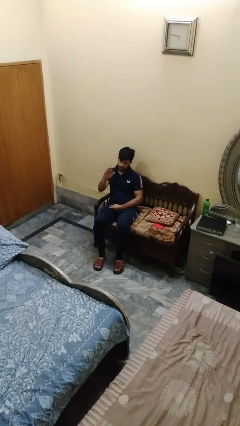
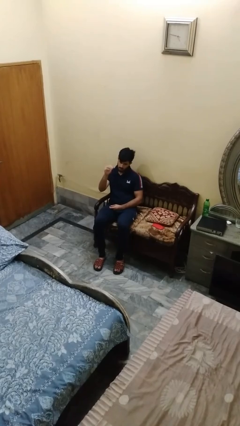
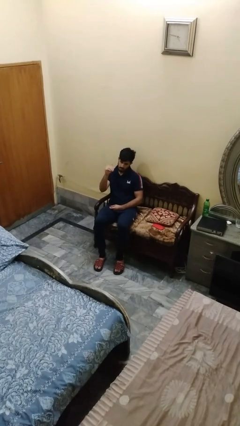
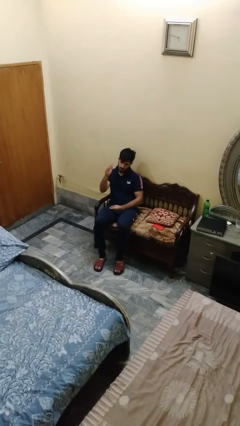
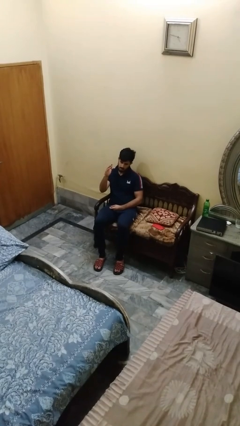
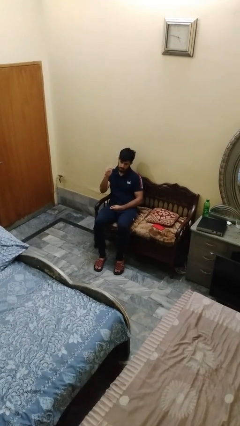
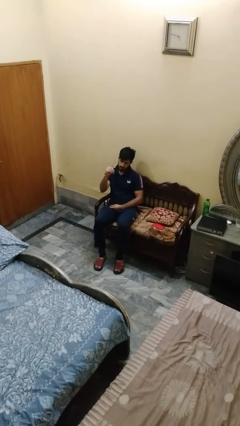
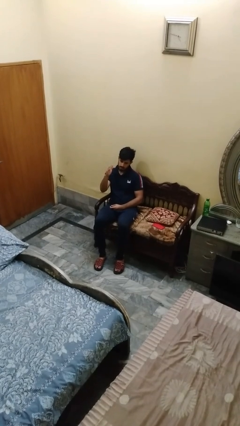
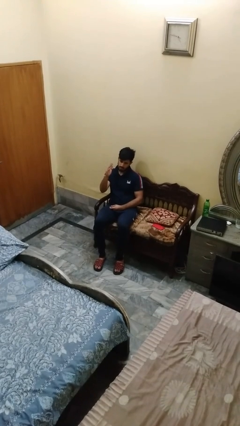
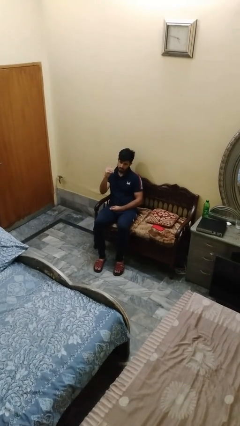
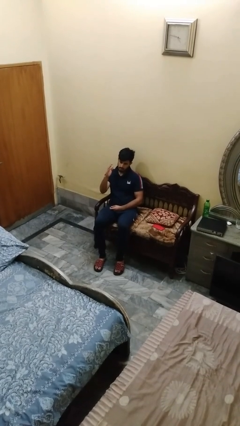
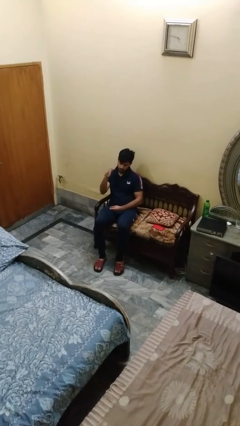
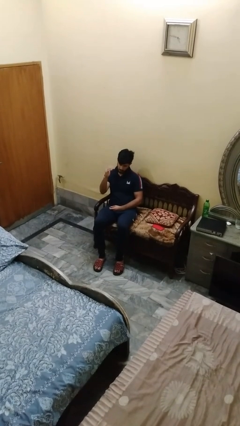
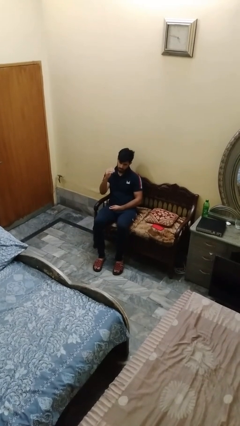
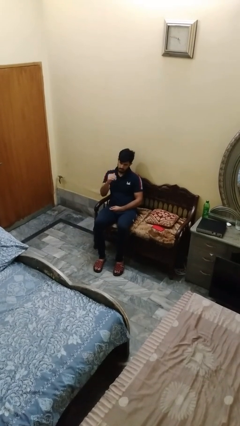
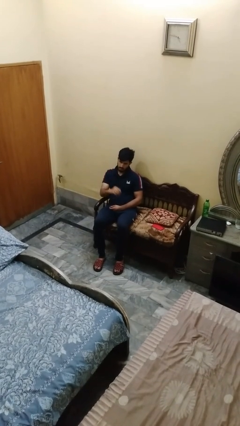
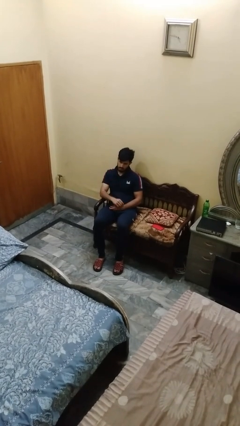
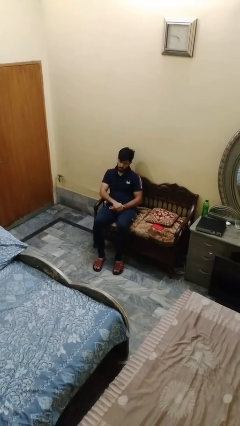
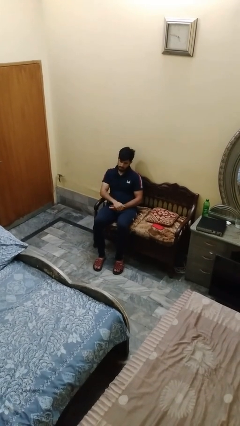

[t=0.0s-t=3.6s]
person gestures come here

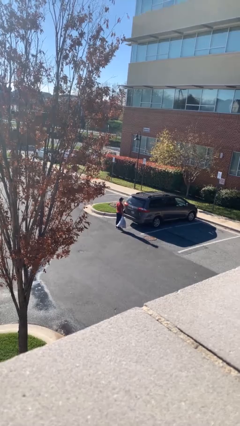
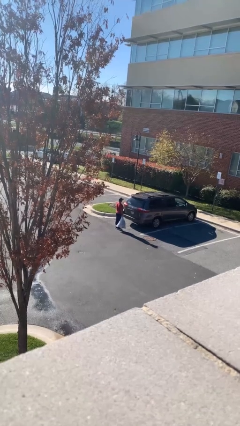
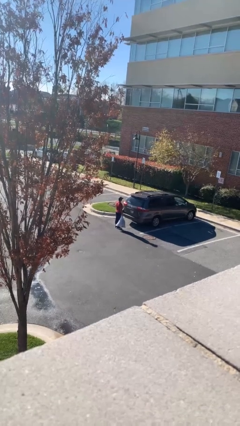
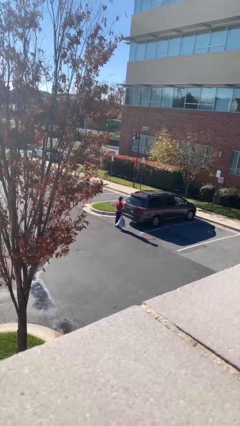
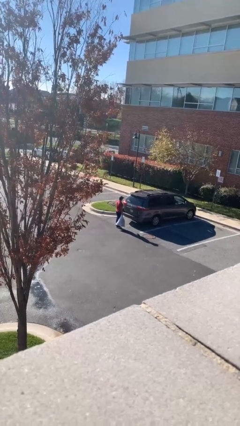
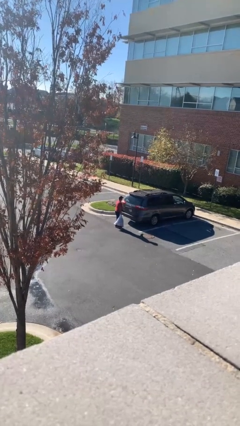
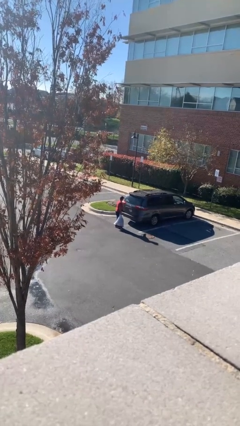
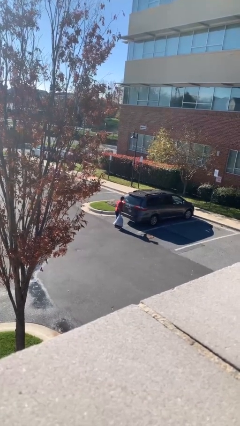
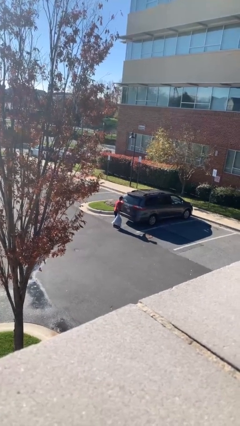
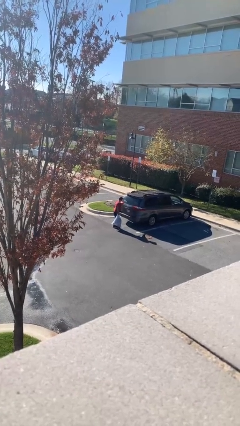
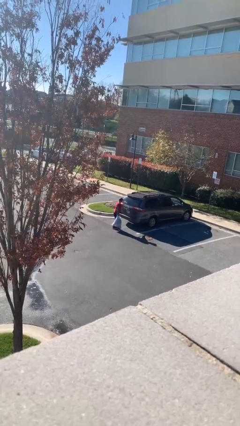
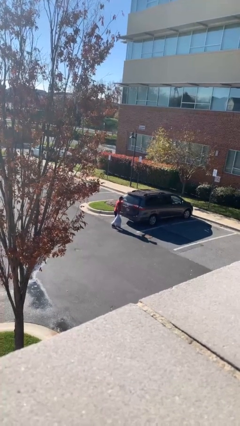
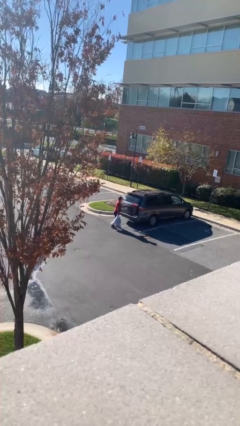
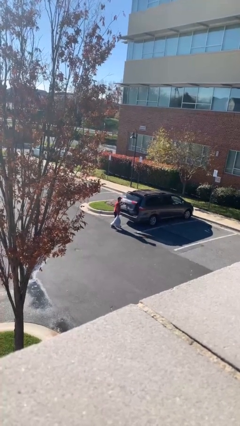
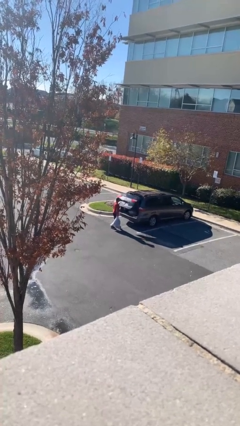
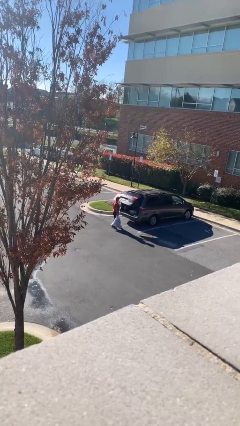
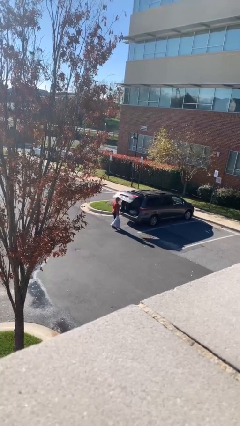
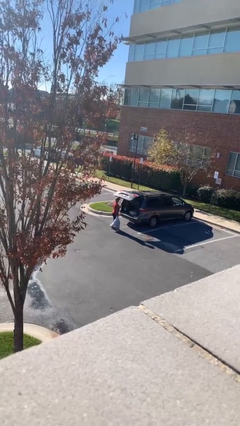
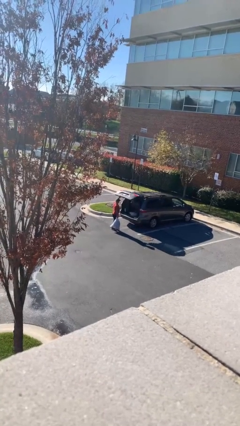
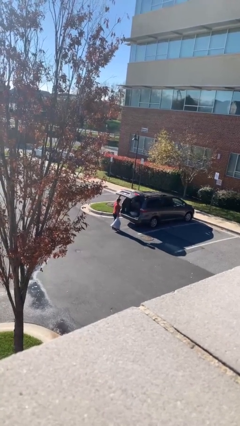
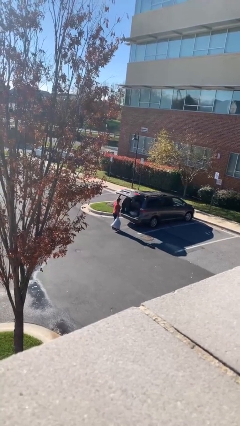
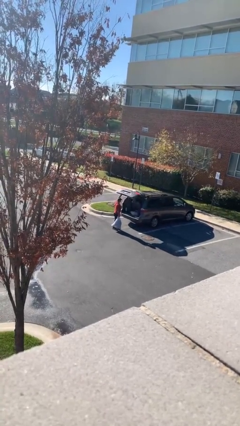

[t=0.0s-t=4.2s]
person opens car trunk

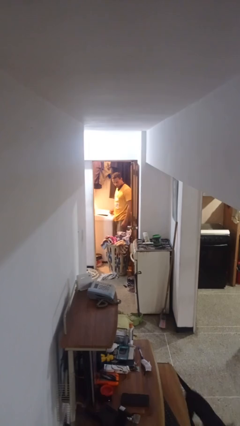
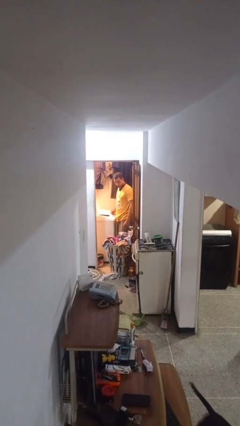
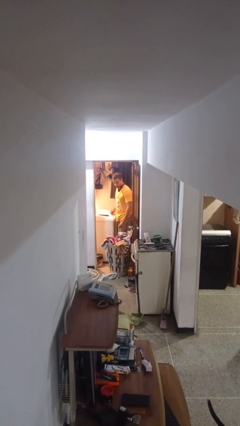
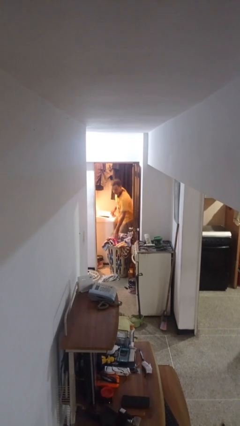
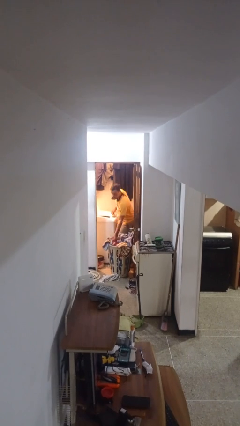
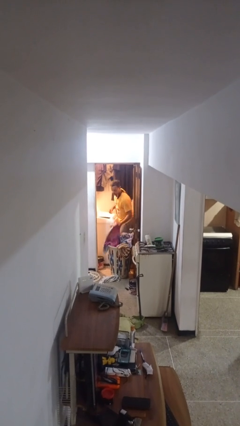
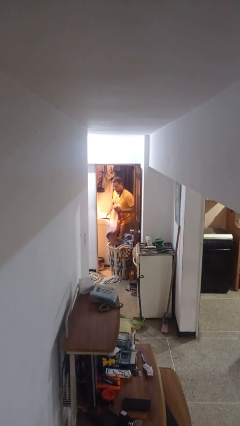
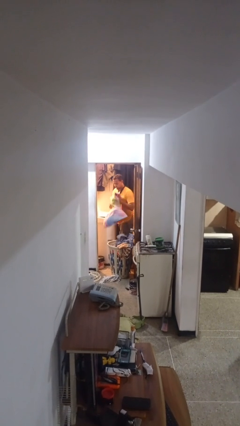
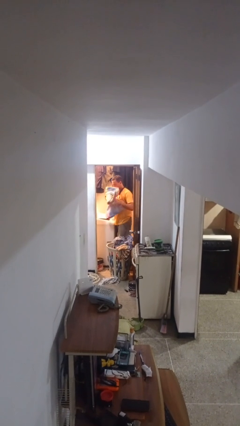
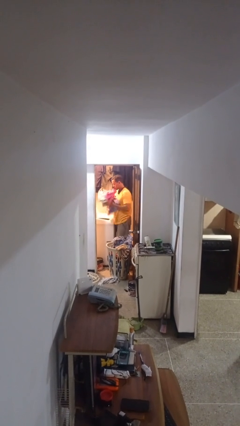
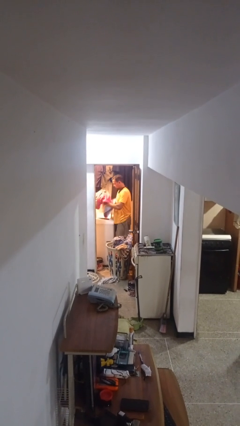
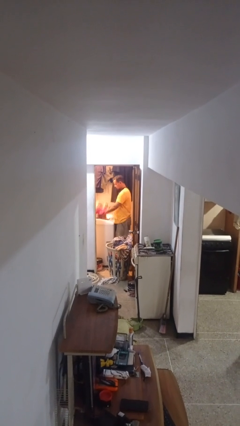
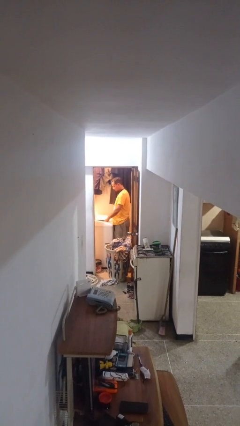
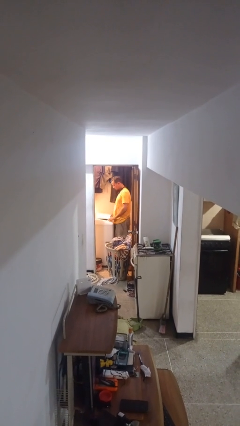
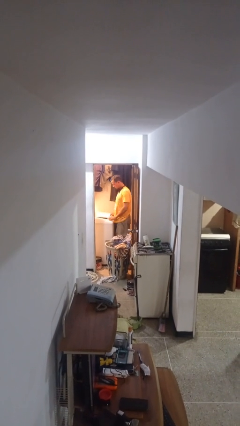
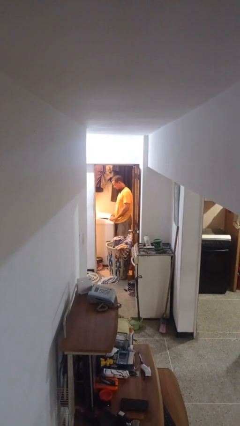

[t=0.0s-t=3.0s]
person loads clotheswasher

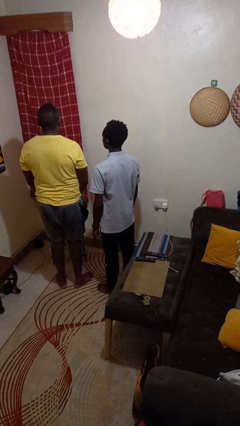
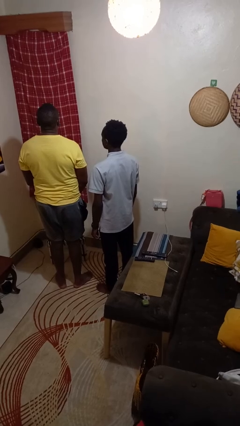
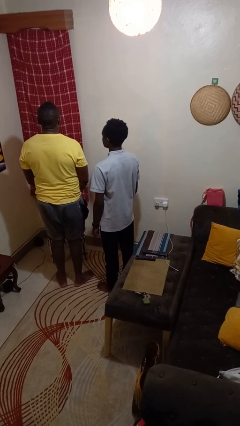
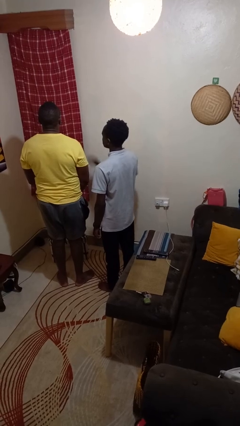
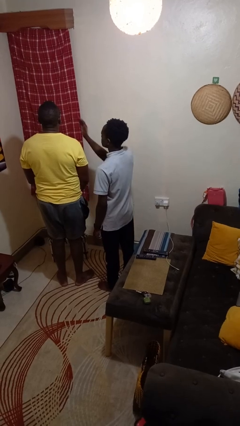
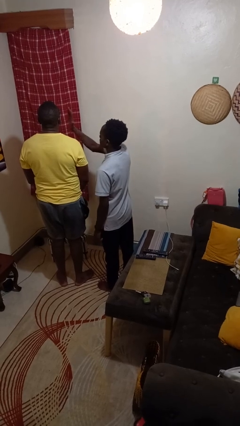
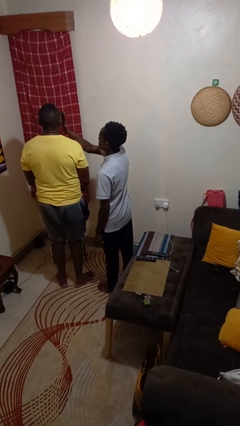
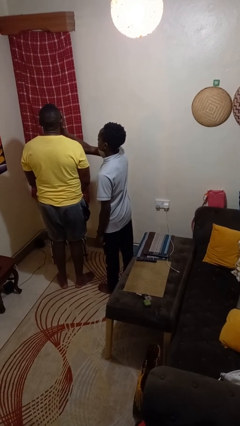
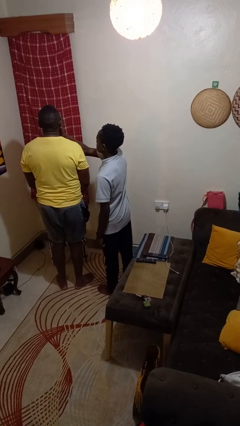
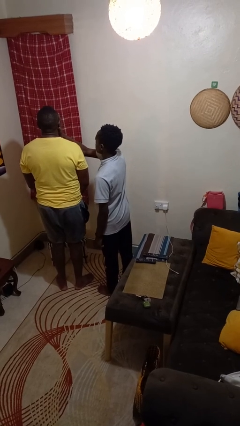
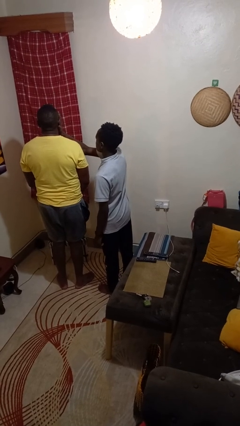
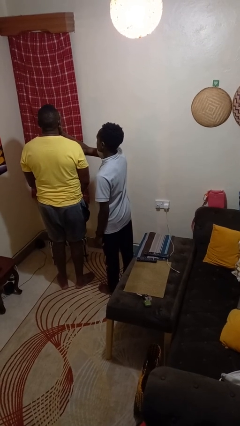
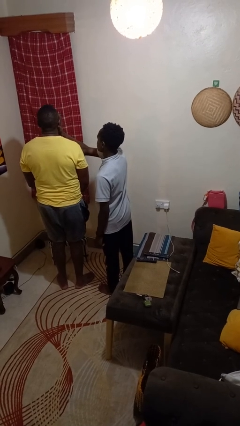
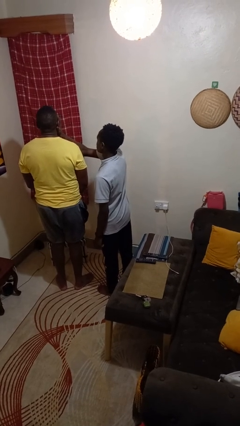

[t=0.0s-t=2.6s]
person touches face of person

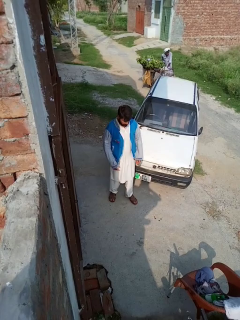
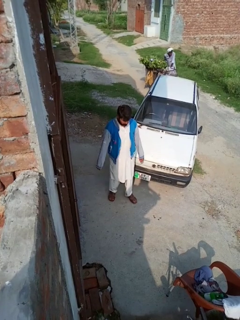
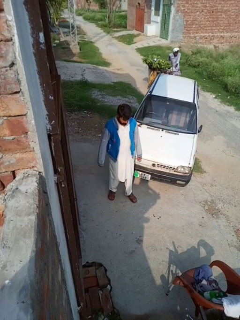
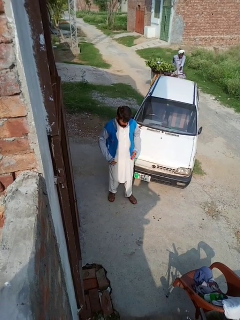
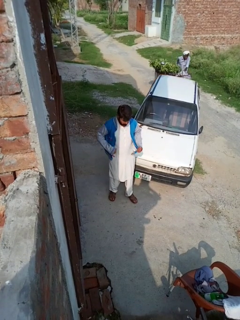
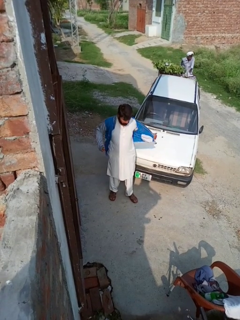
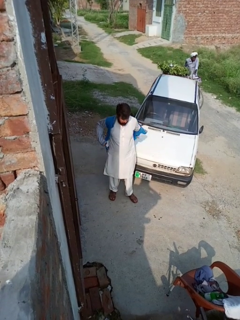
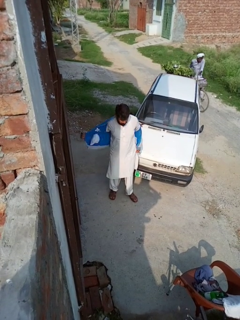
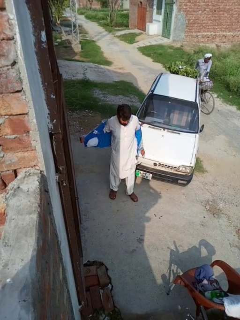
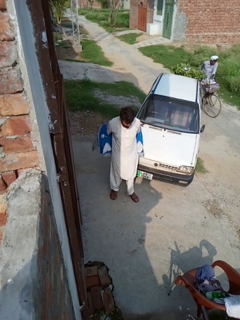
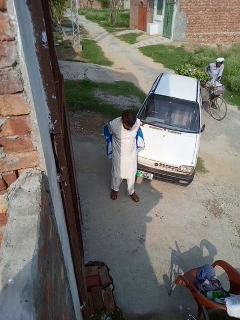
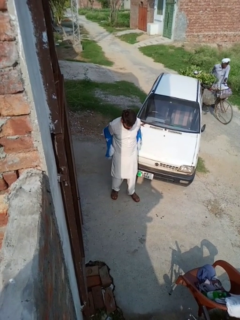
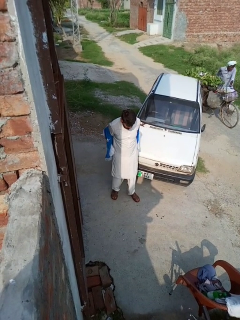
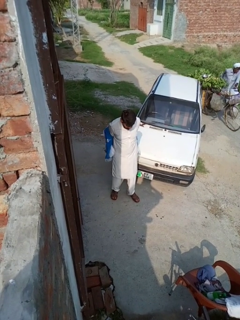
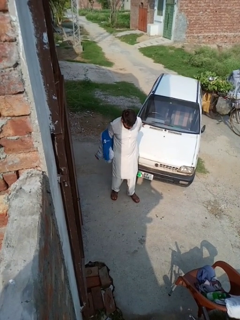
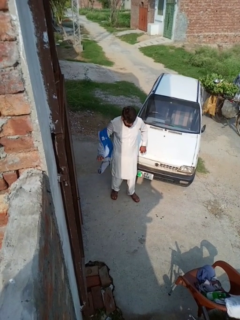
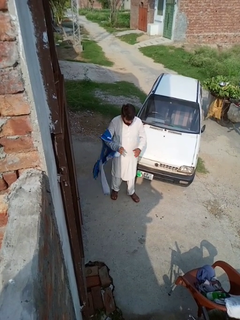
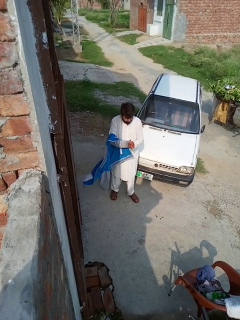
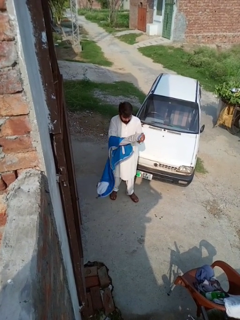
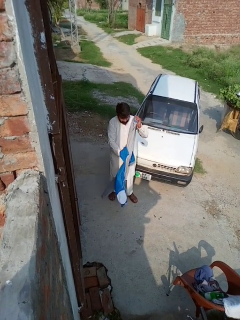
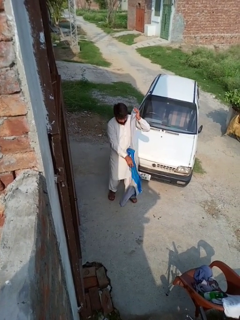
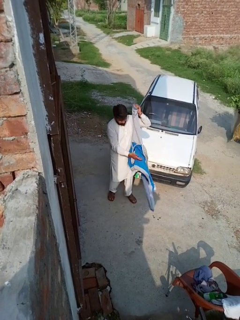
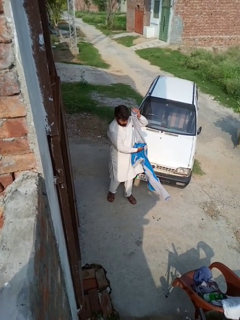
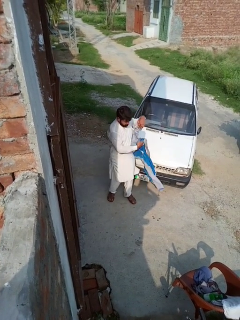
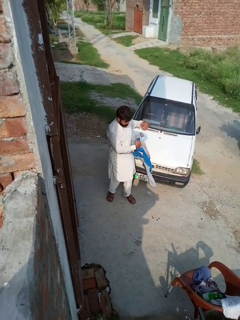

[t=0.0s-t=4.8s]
person takes off jacket

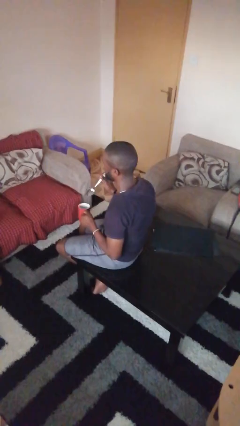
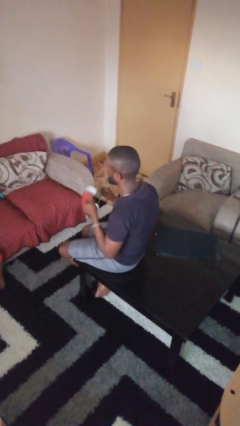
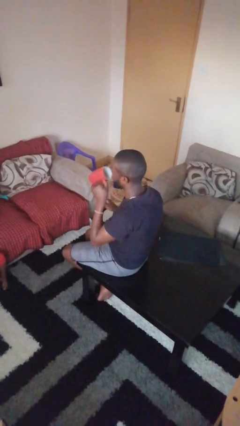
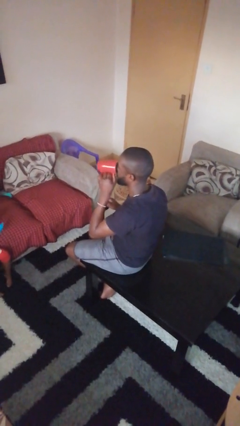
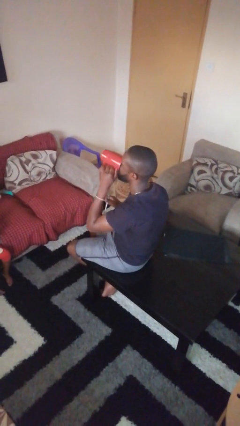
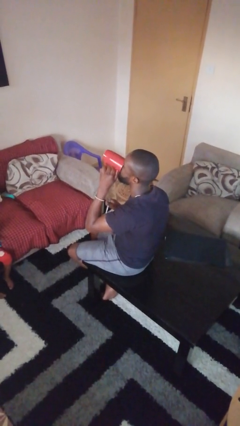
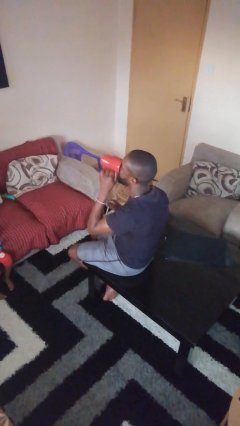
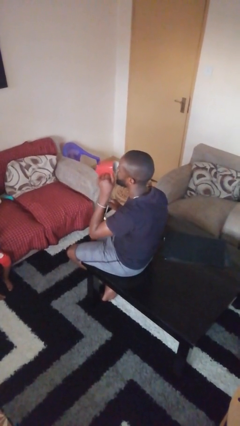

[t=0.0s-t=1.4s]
person drinks from mug
